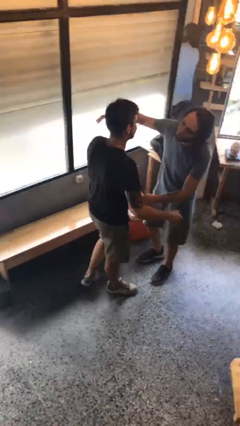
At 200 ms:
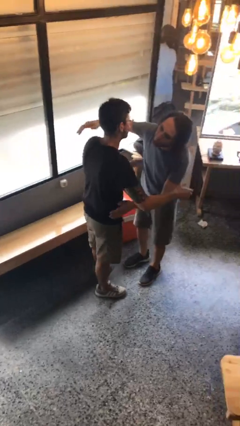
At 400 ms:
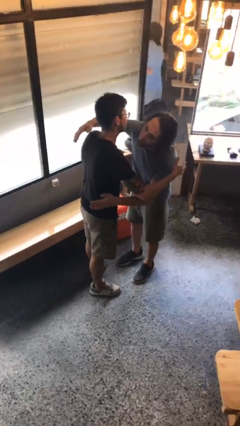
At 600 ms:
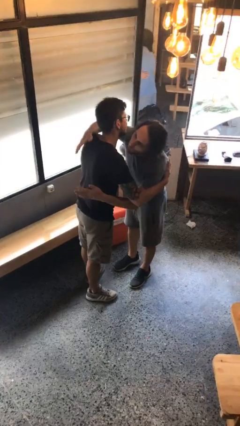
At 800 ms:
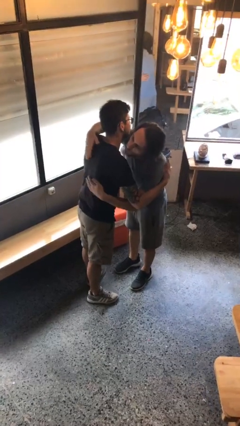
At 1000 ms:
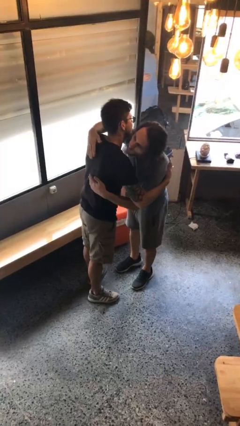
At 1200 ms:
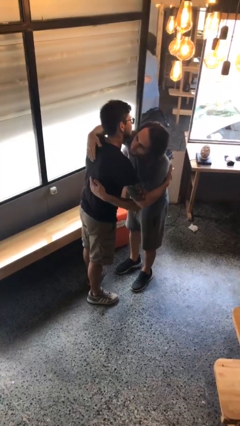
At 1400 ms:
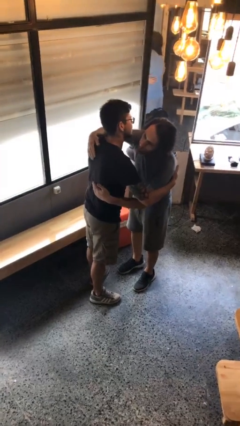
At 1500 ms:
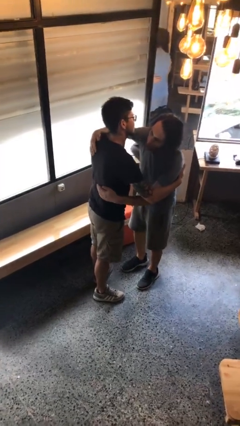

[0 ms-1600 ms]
person embraces person

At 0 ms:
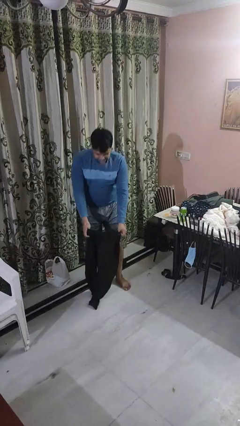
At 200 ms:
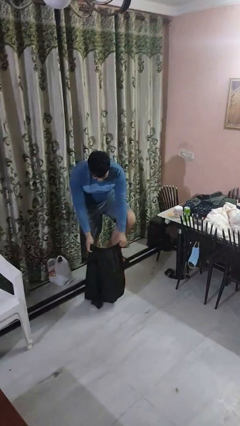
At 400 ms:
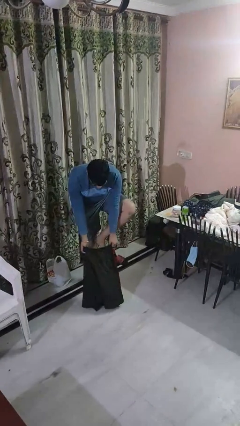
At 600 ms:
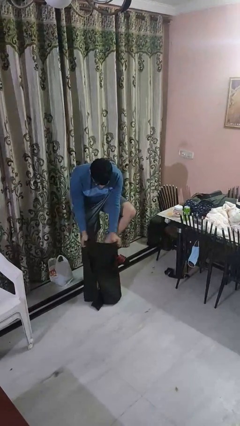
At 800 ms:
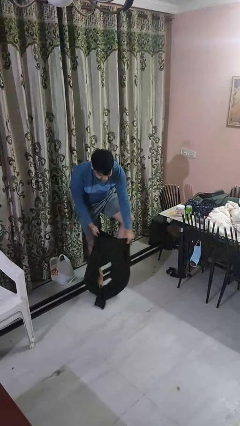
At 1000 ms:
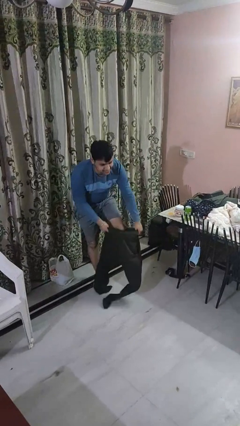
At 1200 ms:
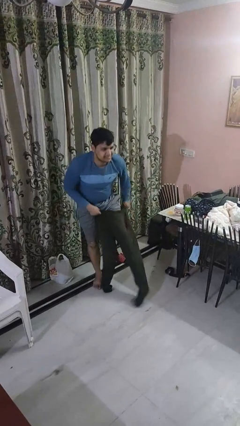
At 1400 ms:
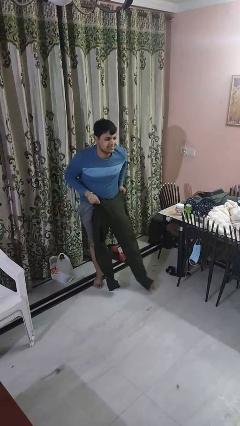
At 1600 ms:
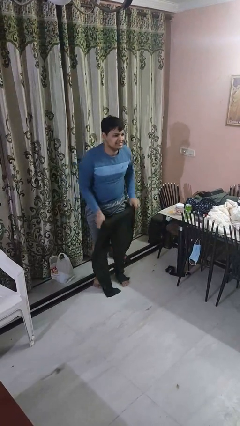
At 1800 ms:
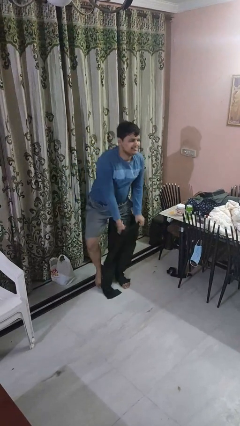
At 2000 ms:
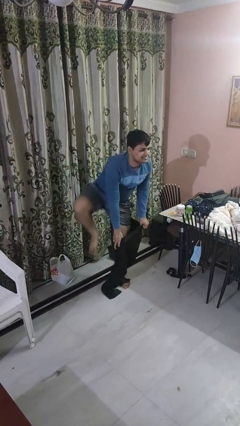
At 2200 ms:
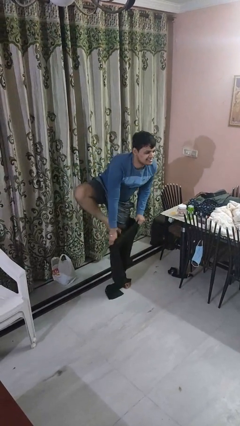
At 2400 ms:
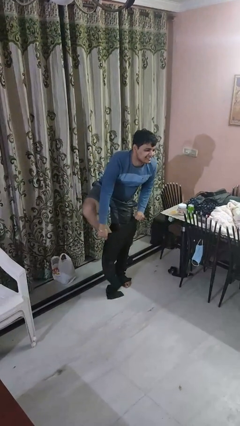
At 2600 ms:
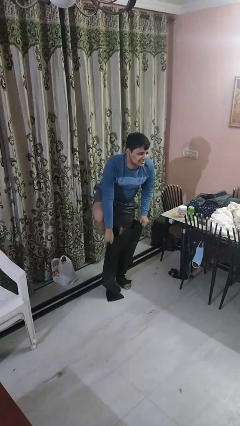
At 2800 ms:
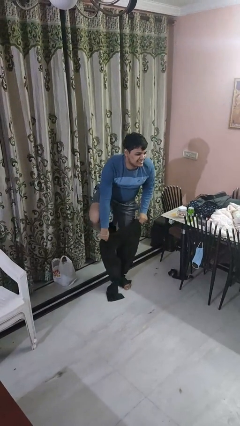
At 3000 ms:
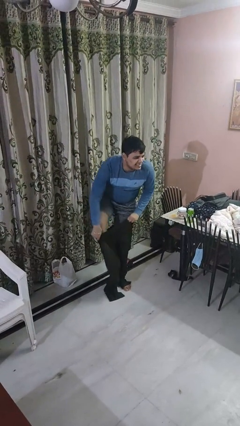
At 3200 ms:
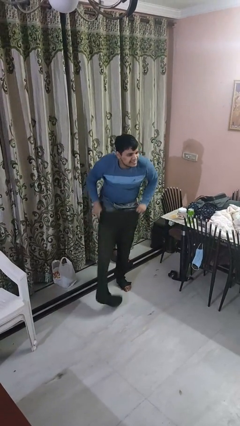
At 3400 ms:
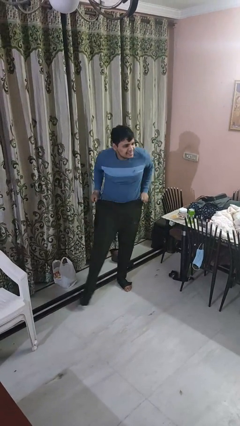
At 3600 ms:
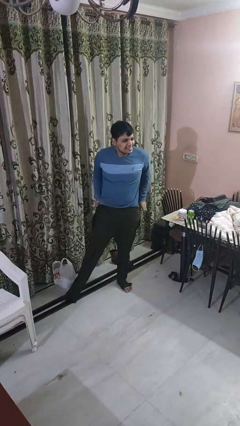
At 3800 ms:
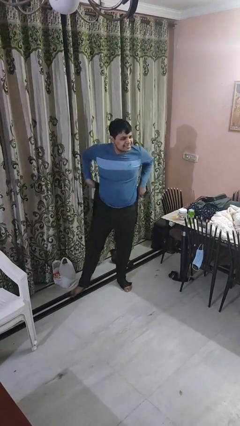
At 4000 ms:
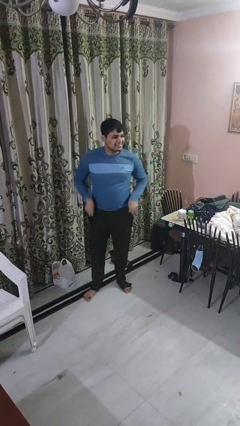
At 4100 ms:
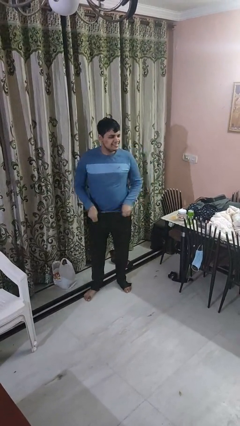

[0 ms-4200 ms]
person puts on pants

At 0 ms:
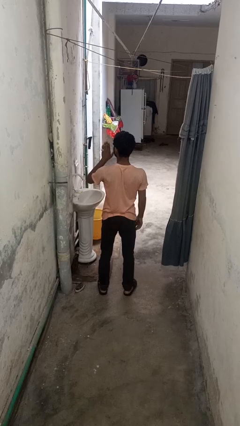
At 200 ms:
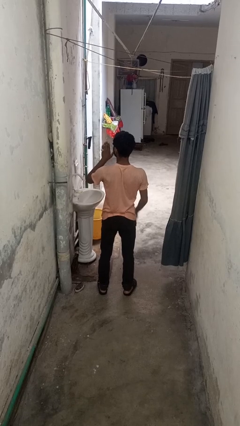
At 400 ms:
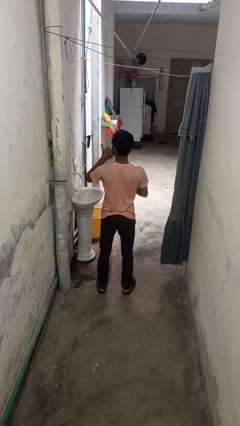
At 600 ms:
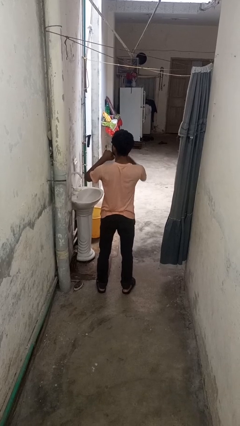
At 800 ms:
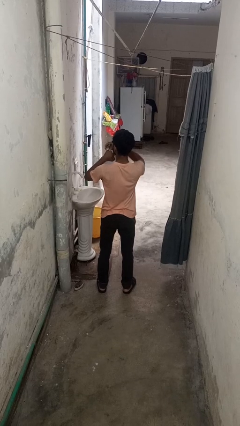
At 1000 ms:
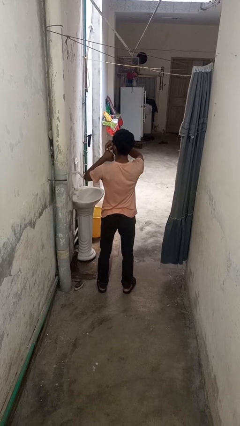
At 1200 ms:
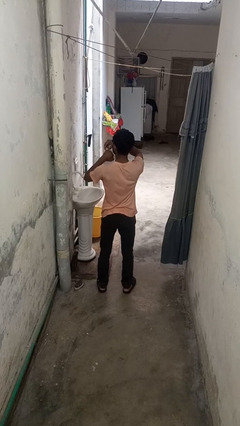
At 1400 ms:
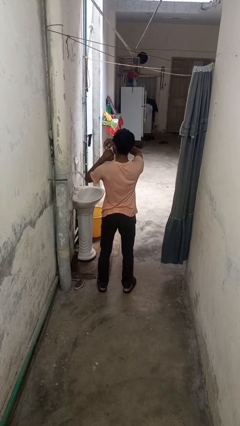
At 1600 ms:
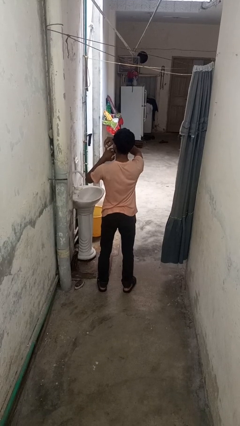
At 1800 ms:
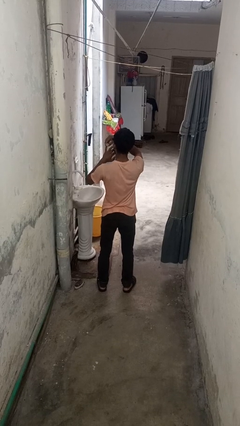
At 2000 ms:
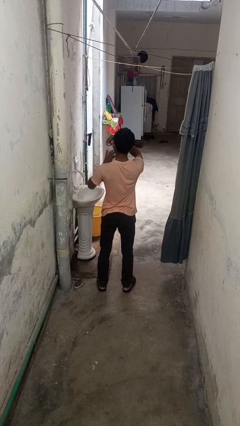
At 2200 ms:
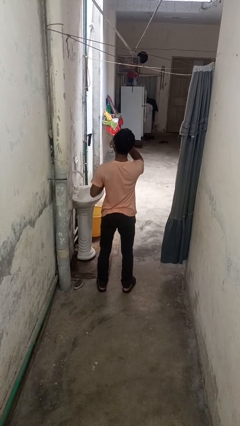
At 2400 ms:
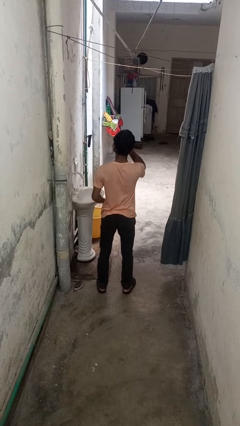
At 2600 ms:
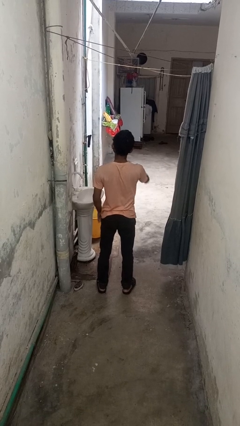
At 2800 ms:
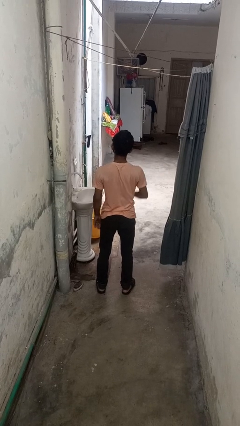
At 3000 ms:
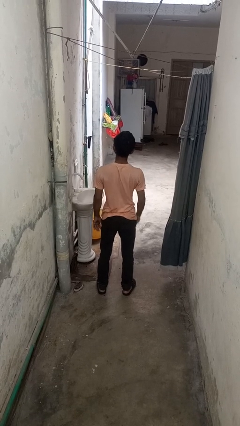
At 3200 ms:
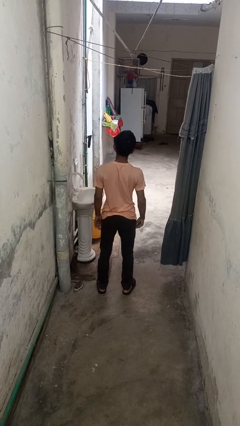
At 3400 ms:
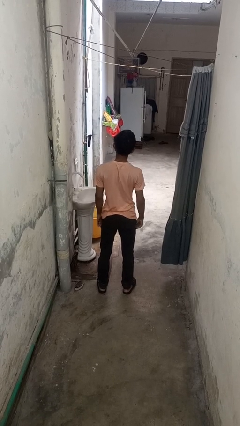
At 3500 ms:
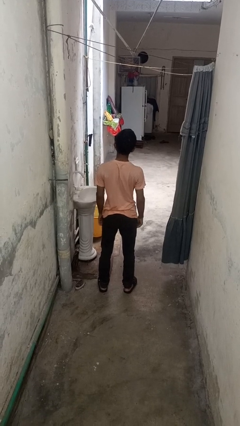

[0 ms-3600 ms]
person takes off ring

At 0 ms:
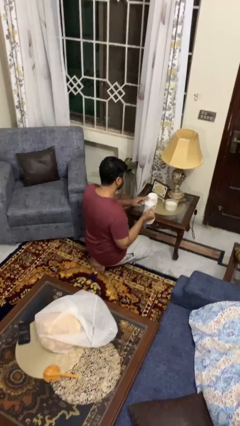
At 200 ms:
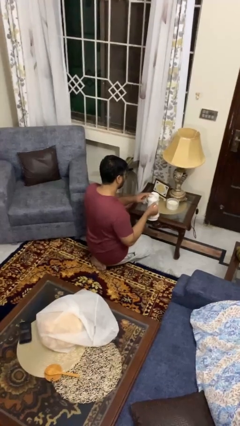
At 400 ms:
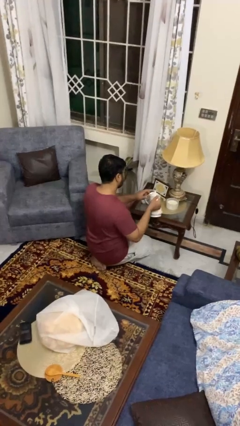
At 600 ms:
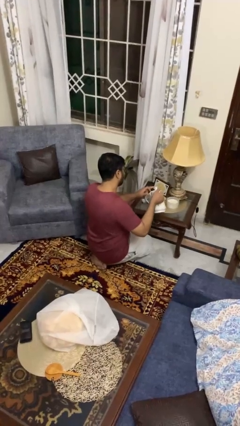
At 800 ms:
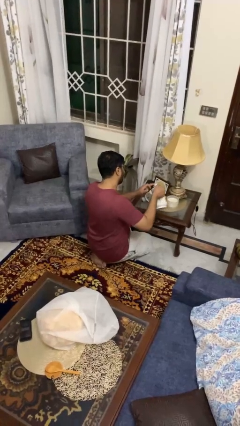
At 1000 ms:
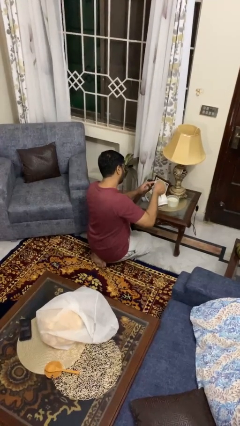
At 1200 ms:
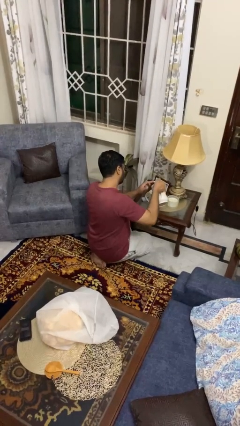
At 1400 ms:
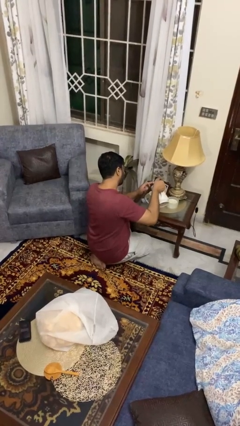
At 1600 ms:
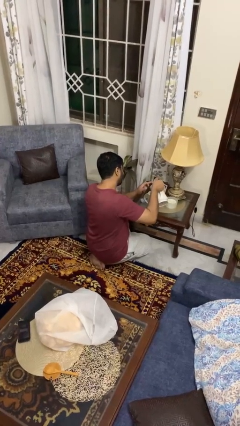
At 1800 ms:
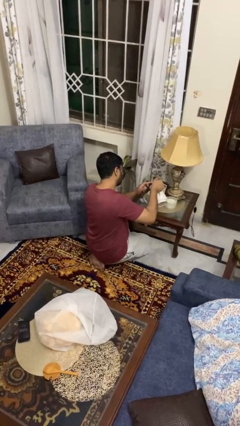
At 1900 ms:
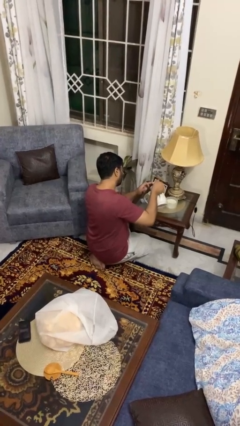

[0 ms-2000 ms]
person pours coffee into mug

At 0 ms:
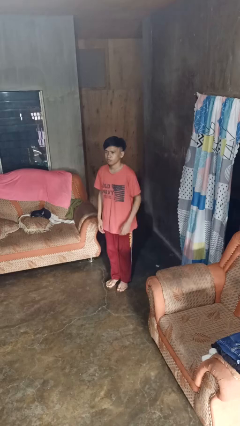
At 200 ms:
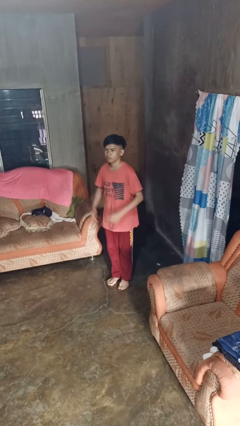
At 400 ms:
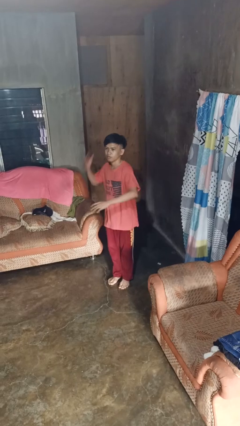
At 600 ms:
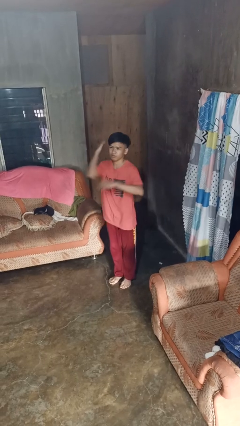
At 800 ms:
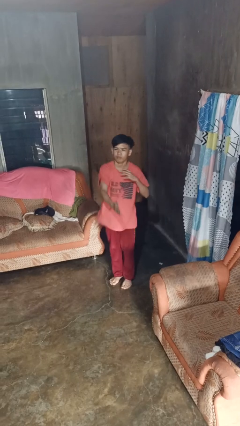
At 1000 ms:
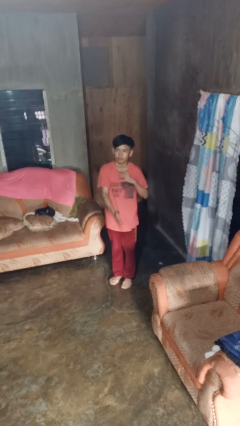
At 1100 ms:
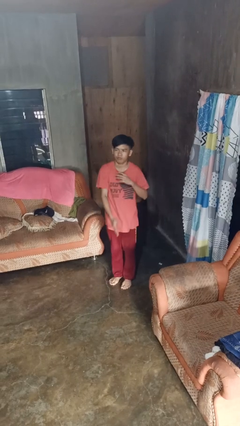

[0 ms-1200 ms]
person karate chop

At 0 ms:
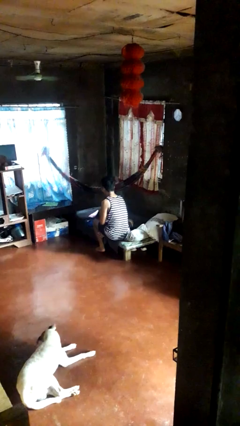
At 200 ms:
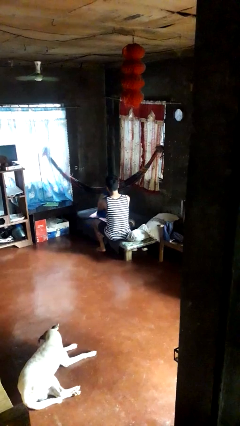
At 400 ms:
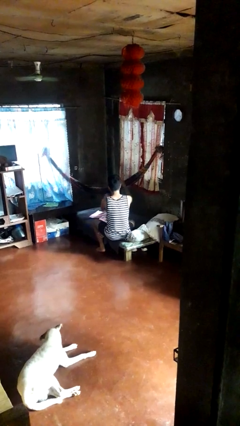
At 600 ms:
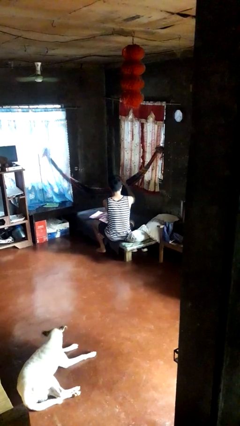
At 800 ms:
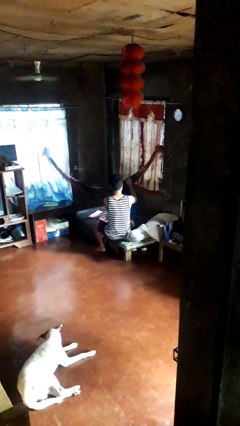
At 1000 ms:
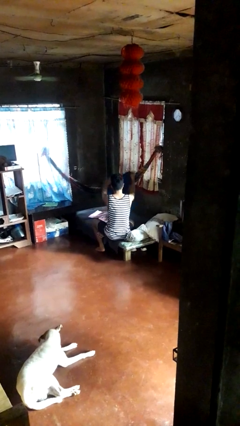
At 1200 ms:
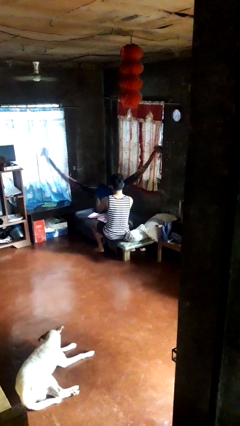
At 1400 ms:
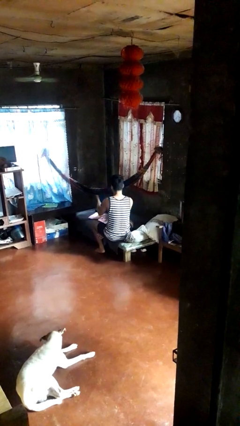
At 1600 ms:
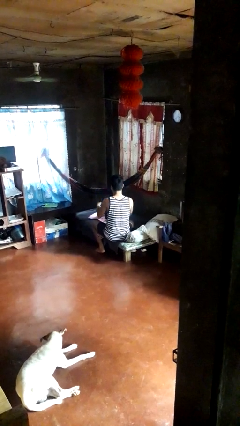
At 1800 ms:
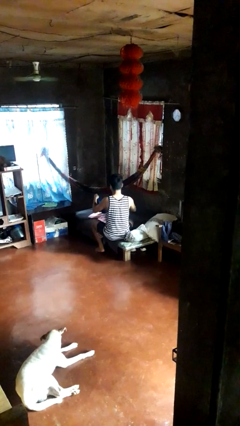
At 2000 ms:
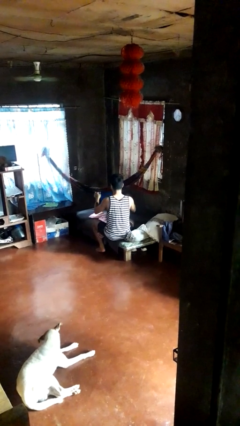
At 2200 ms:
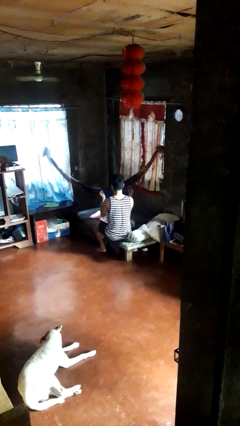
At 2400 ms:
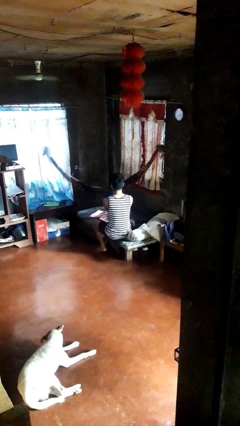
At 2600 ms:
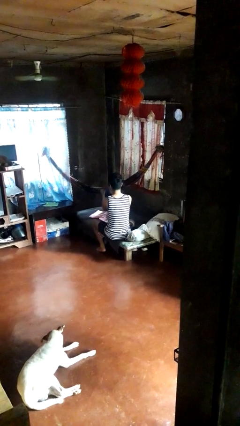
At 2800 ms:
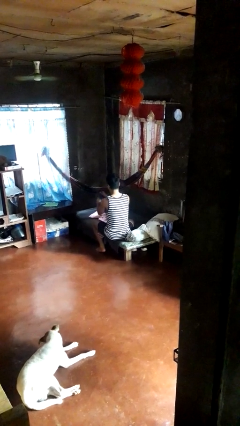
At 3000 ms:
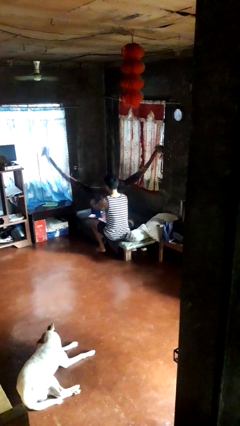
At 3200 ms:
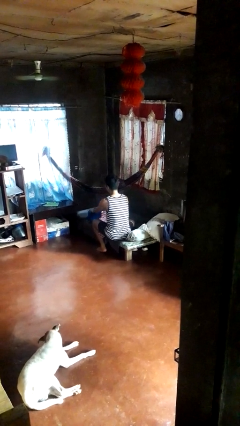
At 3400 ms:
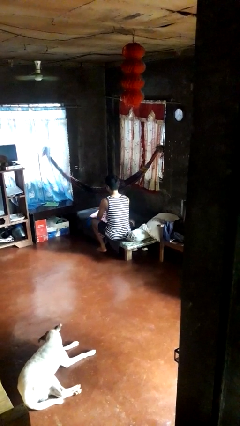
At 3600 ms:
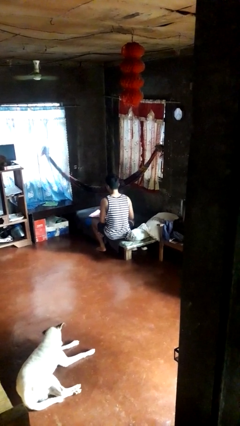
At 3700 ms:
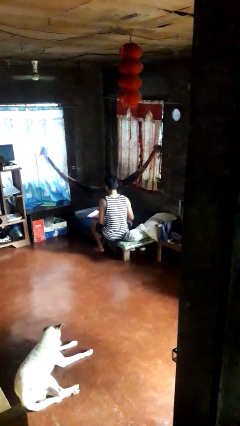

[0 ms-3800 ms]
person folds shirt

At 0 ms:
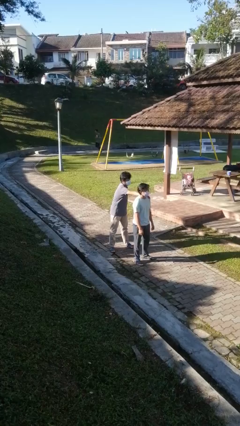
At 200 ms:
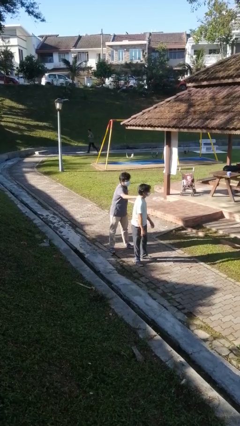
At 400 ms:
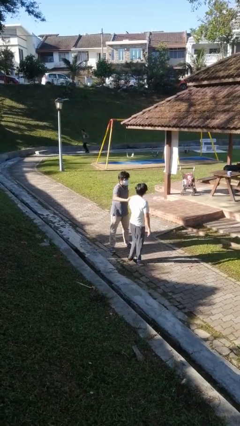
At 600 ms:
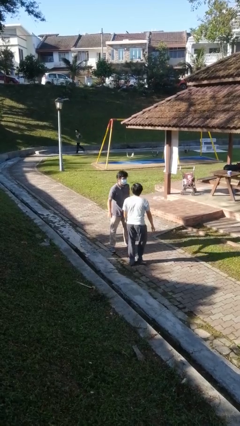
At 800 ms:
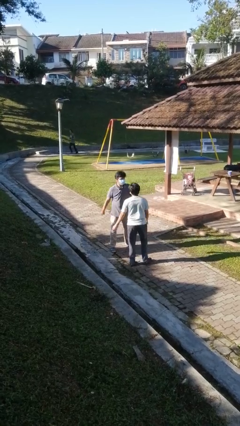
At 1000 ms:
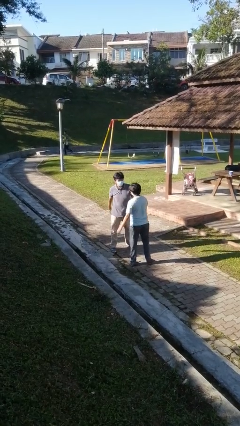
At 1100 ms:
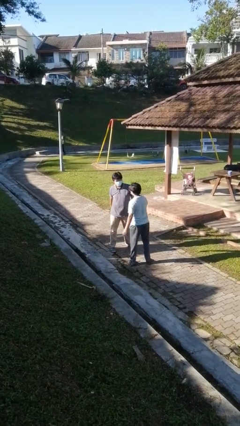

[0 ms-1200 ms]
person spins person around
